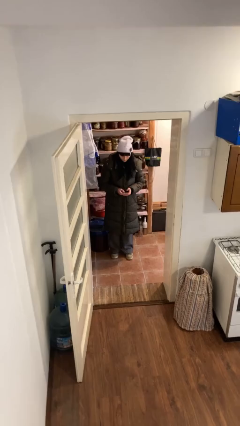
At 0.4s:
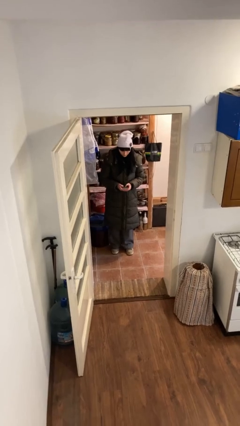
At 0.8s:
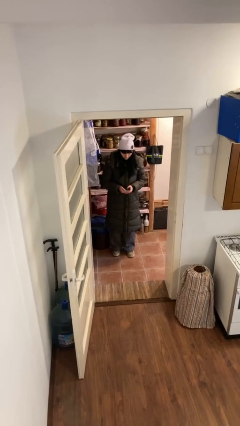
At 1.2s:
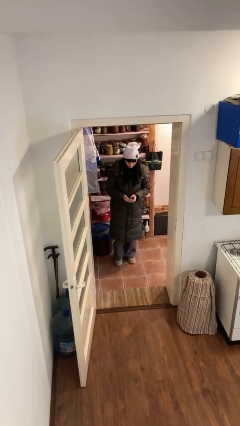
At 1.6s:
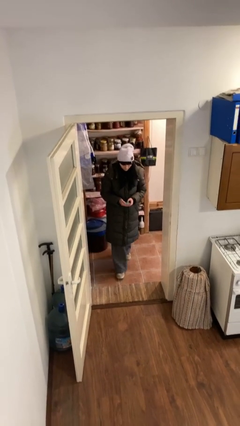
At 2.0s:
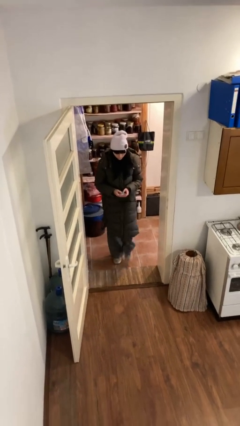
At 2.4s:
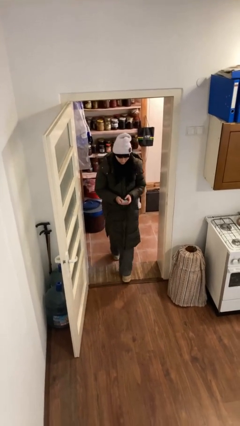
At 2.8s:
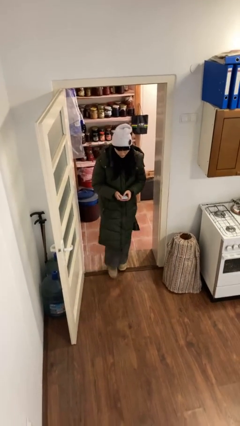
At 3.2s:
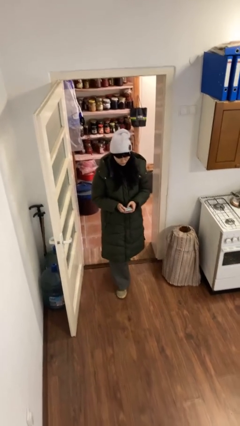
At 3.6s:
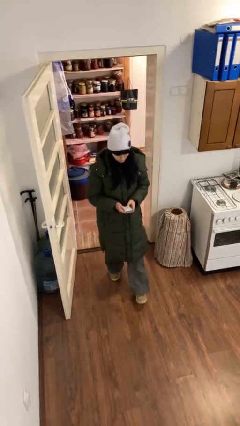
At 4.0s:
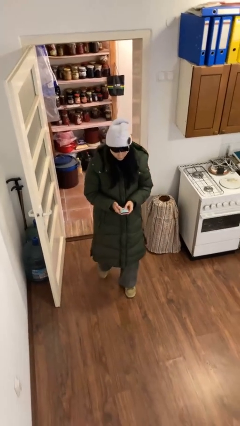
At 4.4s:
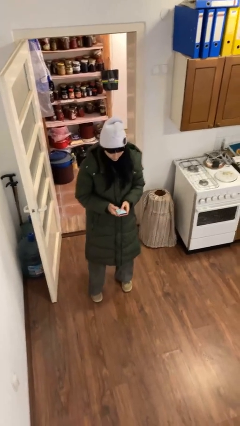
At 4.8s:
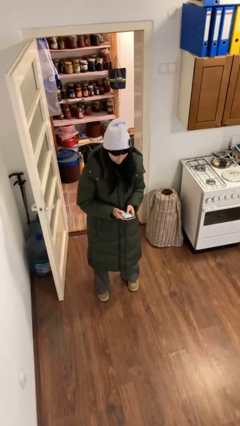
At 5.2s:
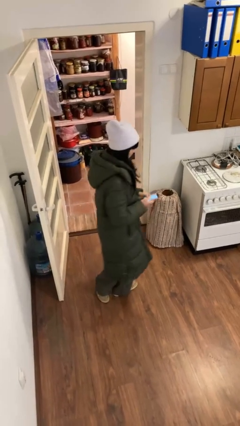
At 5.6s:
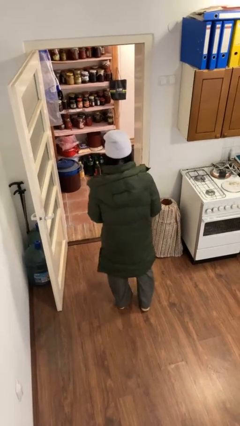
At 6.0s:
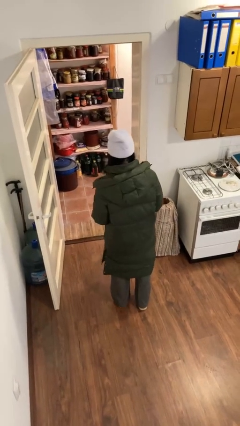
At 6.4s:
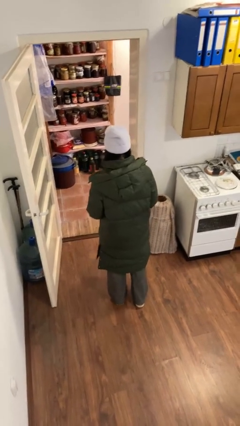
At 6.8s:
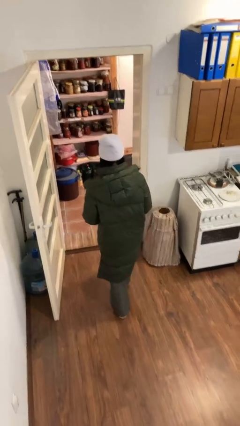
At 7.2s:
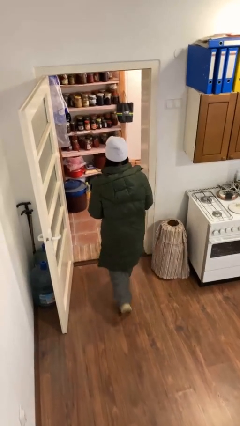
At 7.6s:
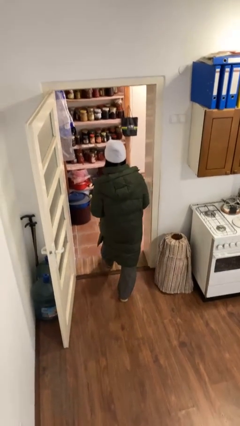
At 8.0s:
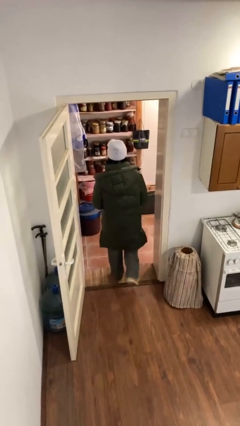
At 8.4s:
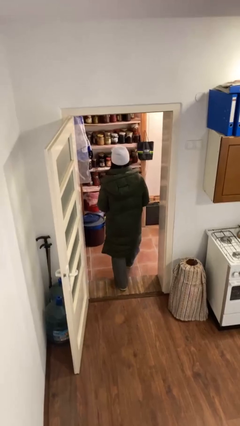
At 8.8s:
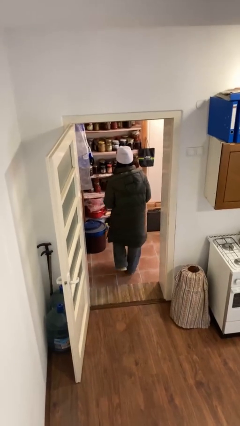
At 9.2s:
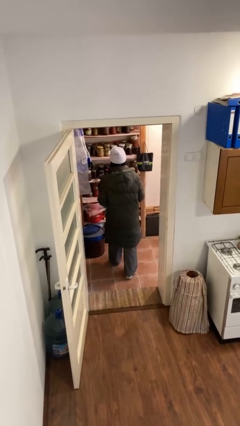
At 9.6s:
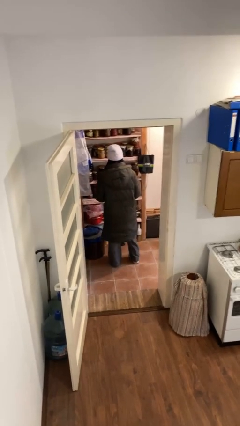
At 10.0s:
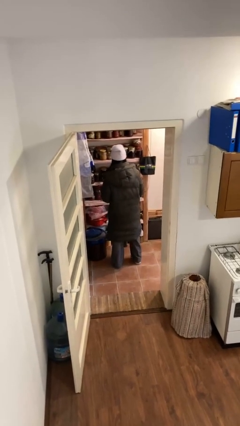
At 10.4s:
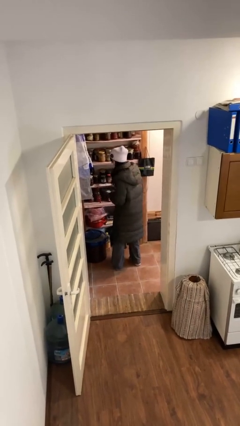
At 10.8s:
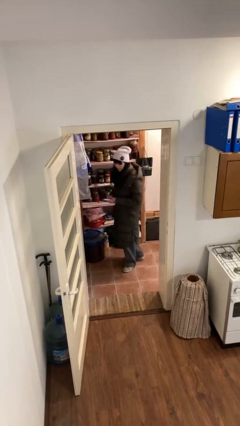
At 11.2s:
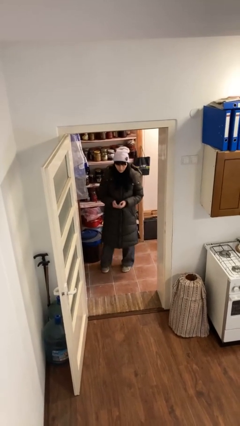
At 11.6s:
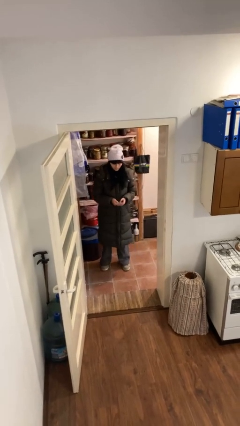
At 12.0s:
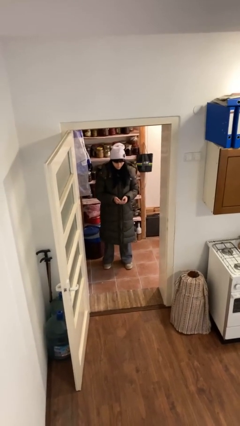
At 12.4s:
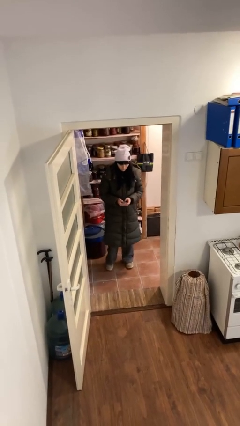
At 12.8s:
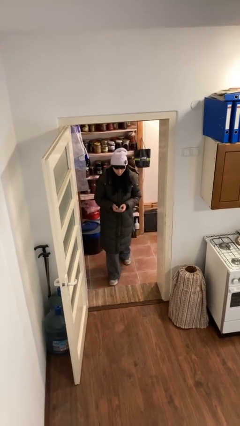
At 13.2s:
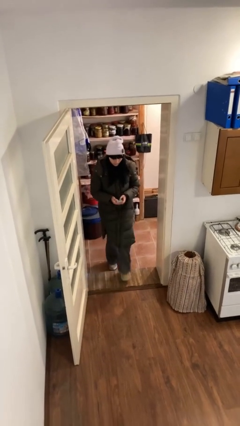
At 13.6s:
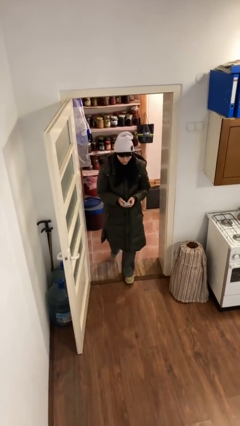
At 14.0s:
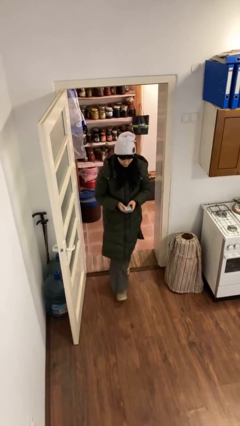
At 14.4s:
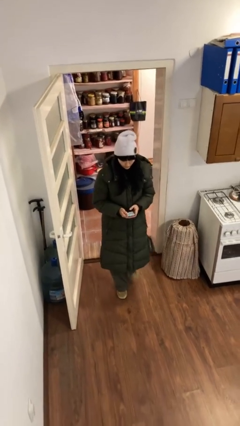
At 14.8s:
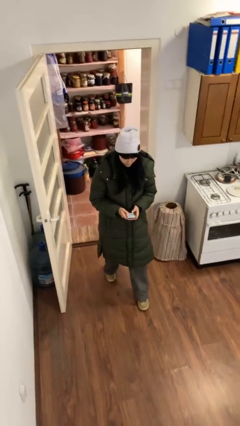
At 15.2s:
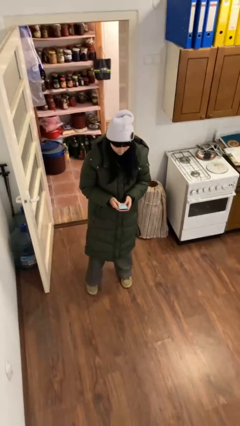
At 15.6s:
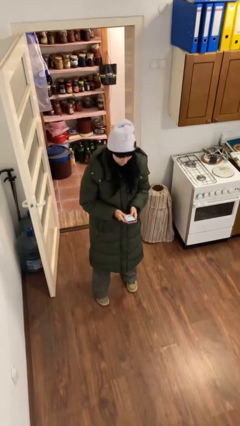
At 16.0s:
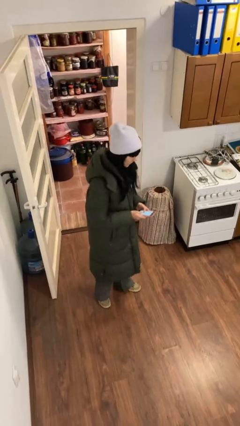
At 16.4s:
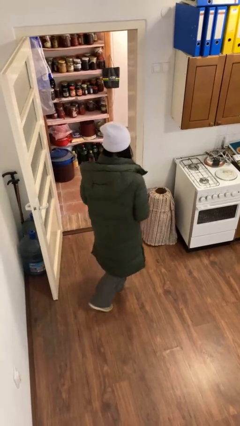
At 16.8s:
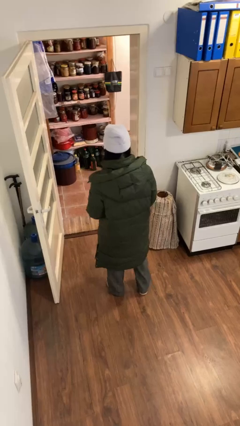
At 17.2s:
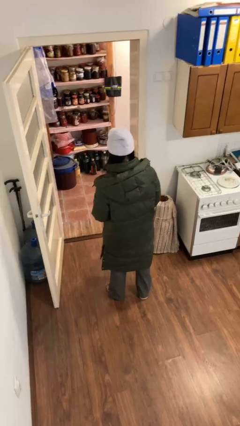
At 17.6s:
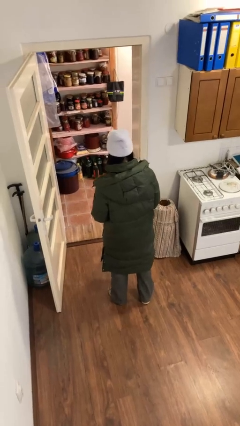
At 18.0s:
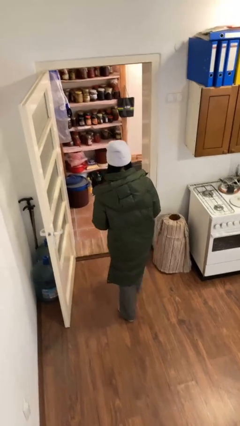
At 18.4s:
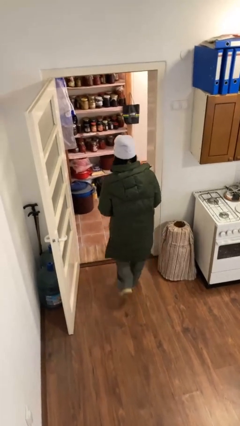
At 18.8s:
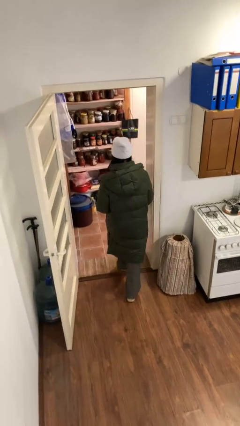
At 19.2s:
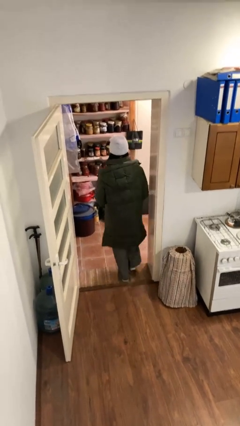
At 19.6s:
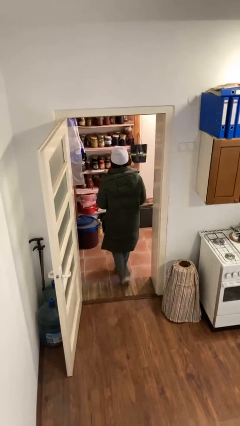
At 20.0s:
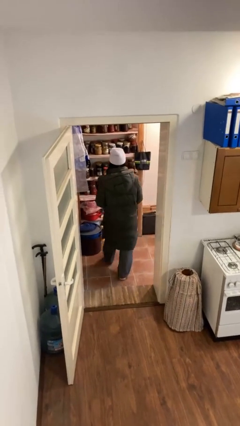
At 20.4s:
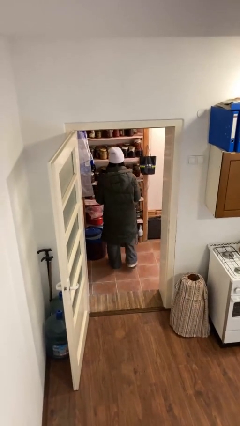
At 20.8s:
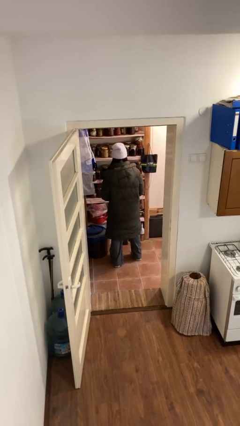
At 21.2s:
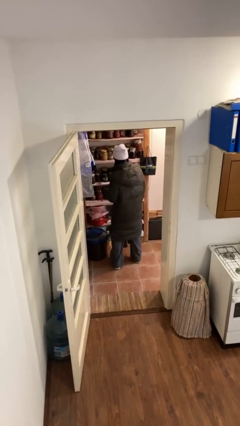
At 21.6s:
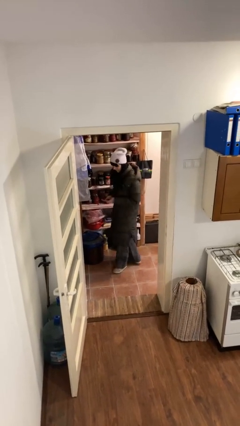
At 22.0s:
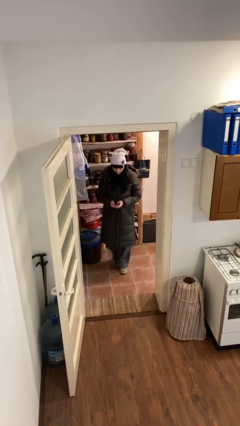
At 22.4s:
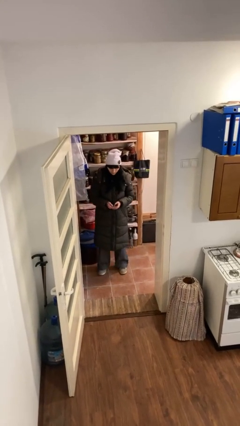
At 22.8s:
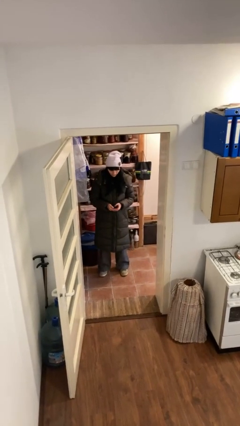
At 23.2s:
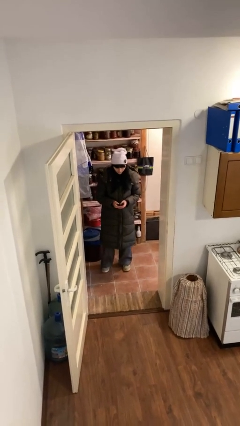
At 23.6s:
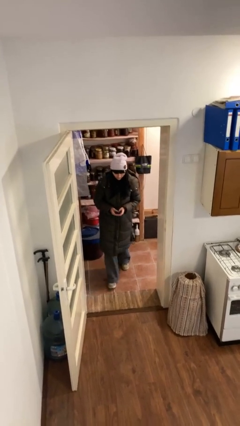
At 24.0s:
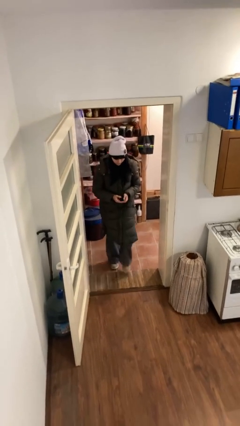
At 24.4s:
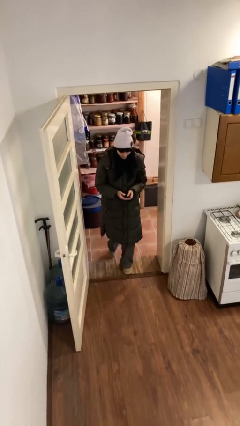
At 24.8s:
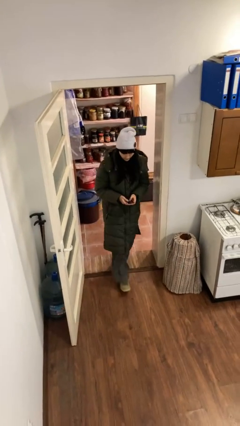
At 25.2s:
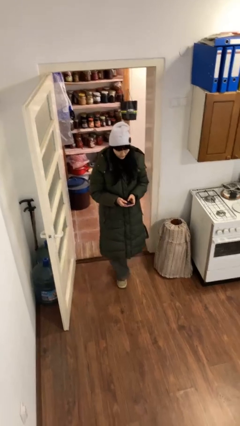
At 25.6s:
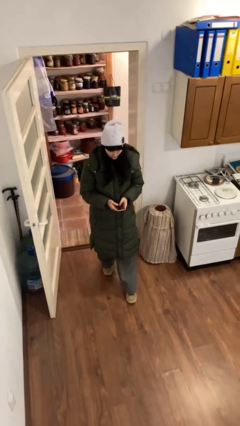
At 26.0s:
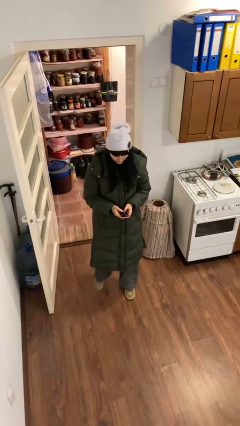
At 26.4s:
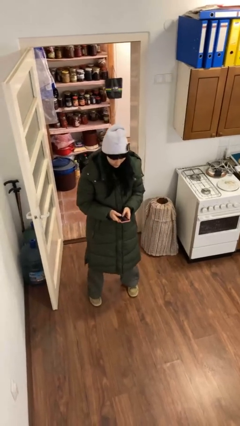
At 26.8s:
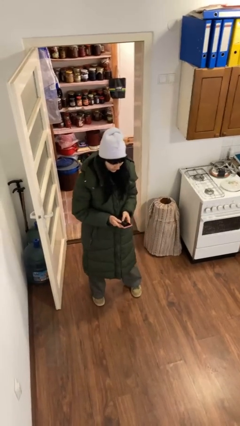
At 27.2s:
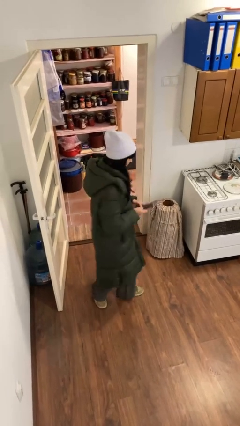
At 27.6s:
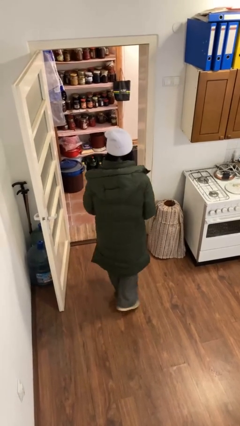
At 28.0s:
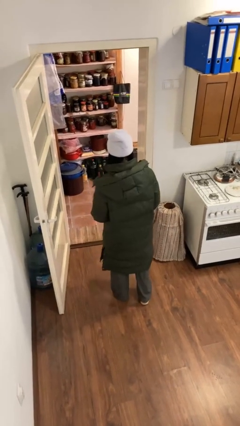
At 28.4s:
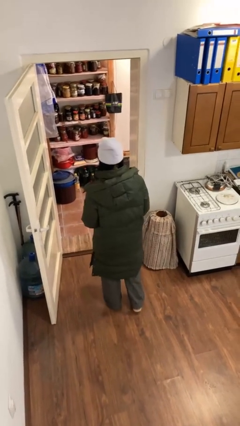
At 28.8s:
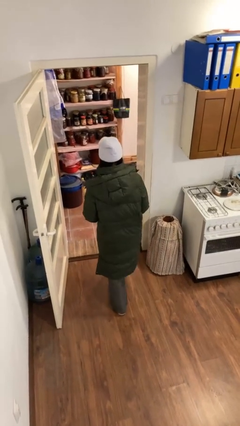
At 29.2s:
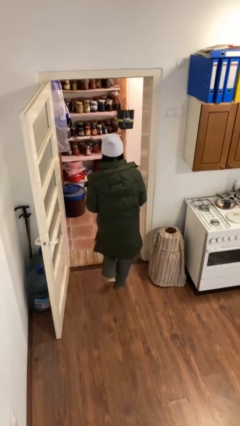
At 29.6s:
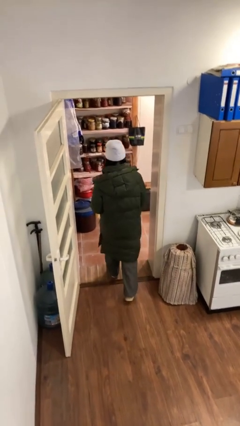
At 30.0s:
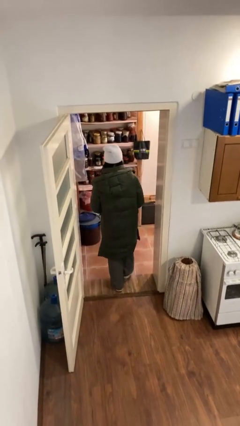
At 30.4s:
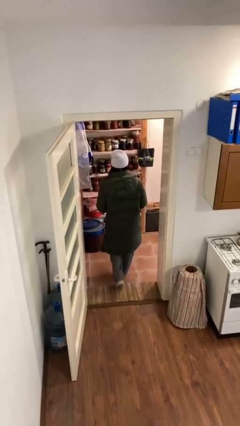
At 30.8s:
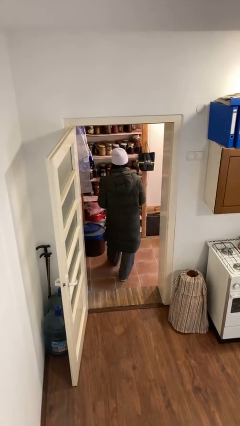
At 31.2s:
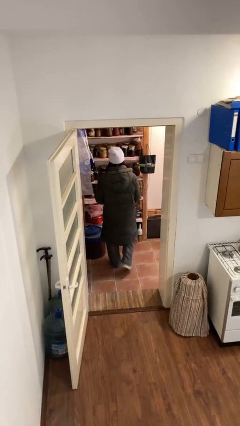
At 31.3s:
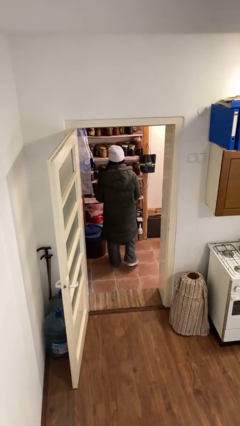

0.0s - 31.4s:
person texts on phone

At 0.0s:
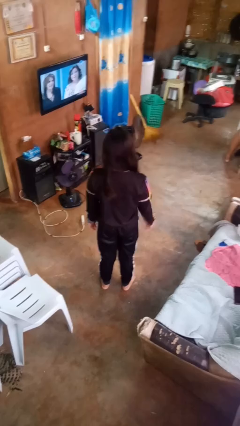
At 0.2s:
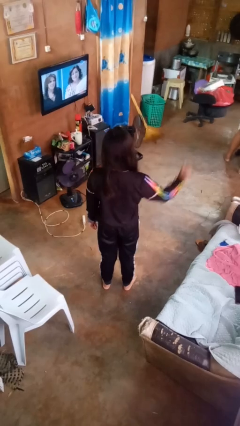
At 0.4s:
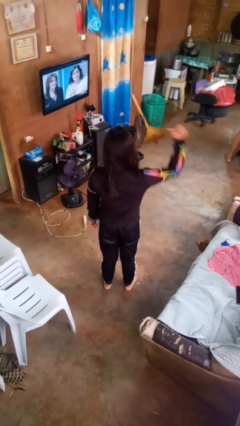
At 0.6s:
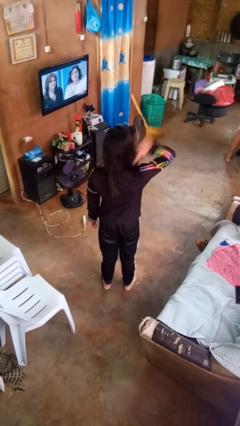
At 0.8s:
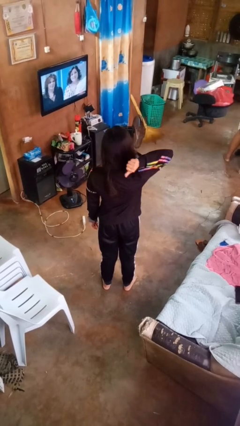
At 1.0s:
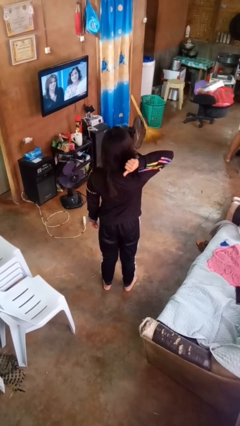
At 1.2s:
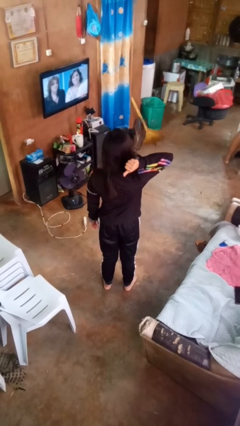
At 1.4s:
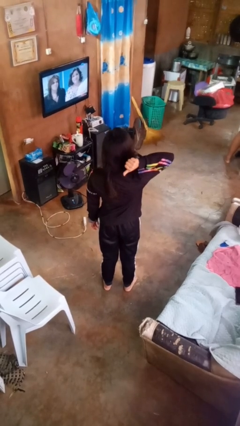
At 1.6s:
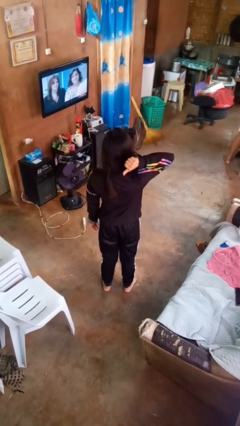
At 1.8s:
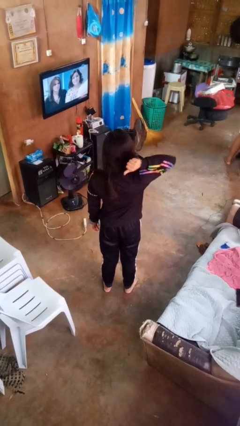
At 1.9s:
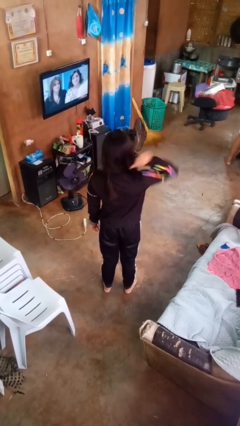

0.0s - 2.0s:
person gestures behind me
